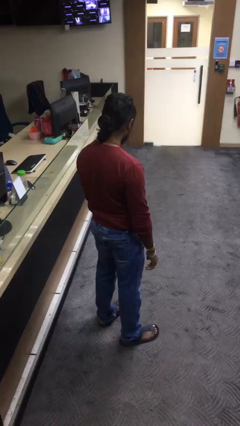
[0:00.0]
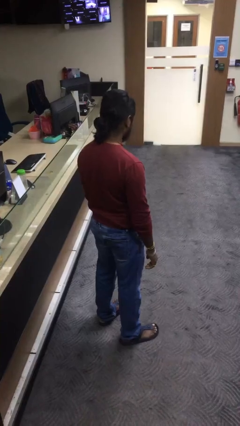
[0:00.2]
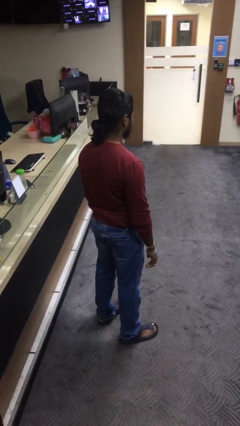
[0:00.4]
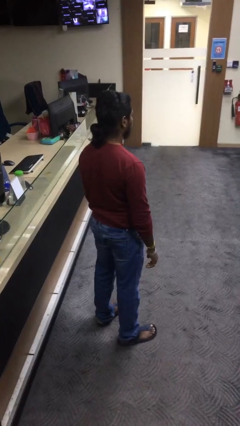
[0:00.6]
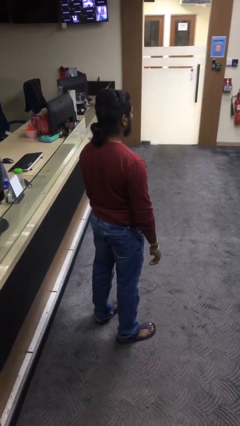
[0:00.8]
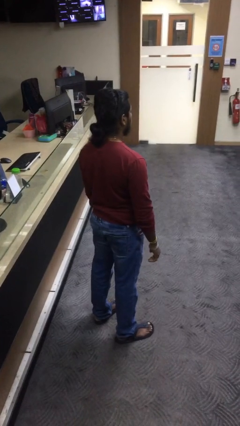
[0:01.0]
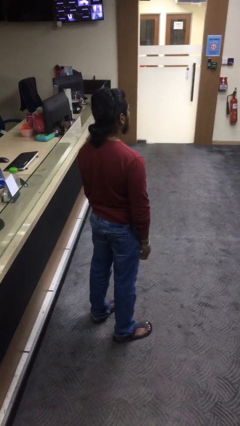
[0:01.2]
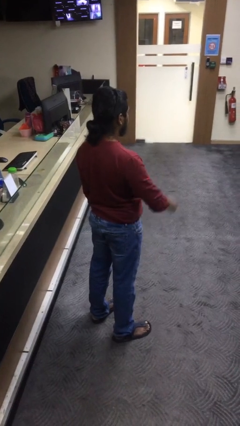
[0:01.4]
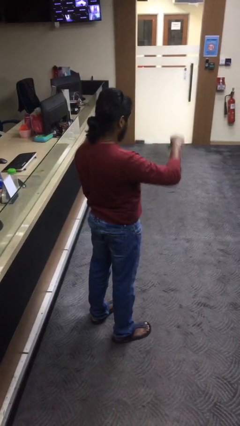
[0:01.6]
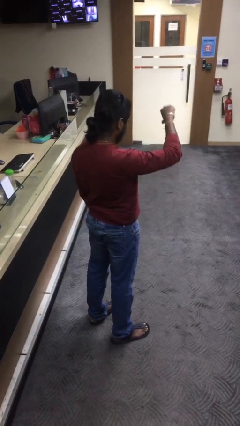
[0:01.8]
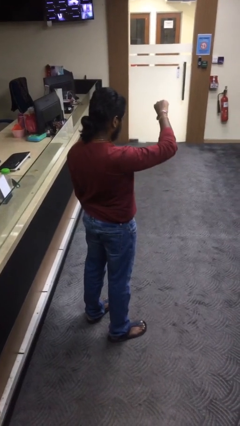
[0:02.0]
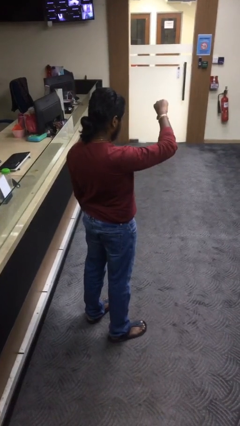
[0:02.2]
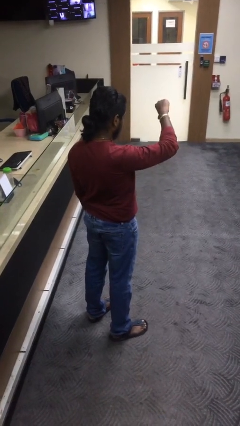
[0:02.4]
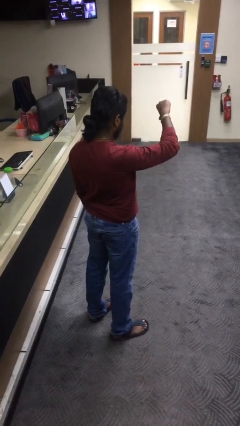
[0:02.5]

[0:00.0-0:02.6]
person gestures thumbs down

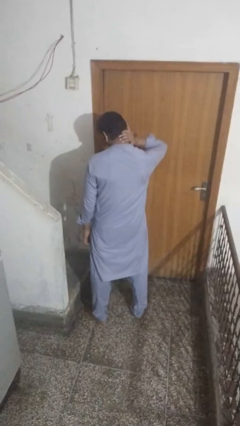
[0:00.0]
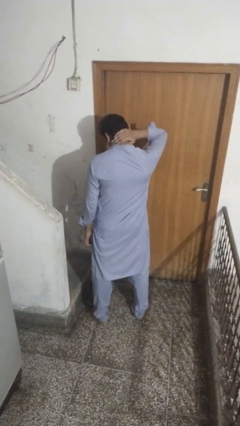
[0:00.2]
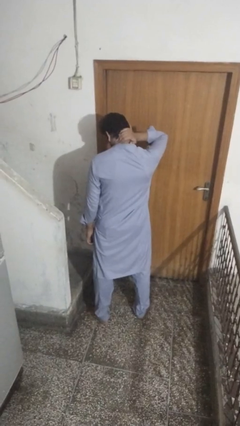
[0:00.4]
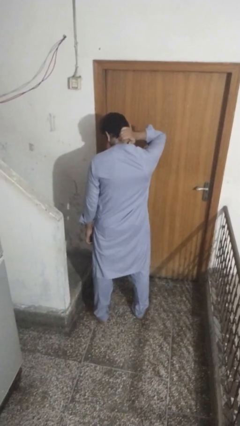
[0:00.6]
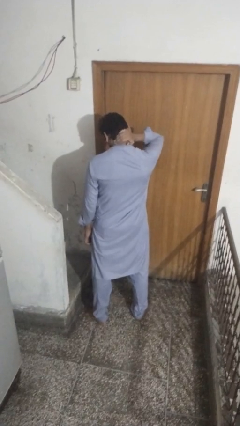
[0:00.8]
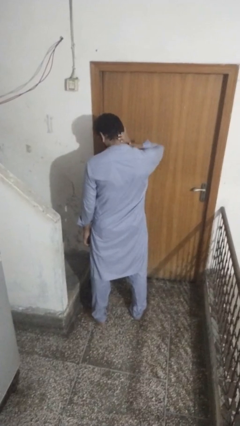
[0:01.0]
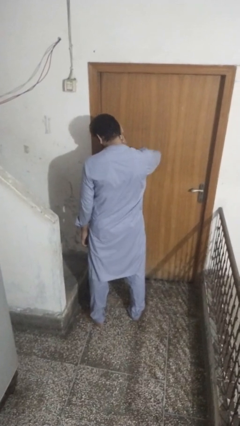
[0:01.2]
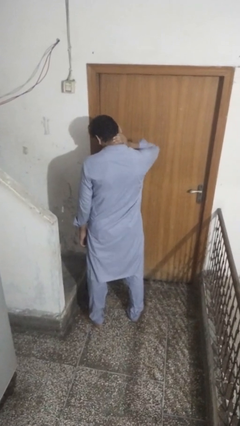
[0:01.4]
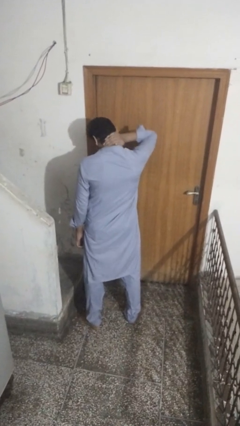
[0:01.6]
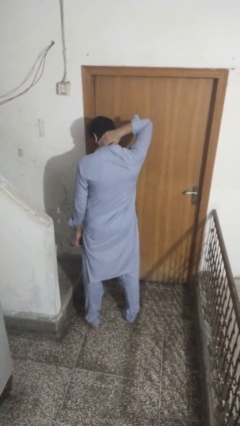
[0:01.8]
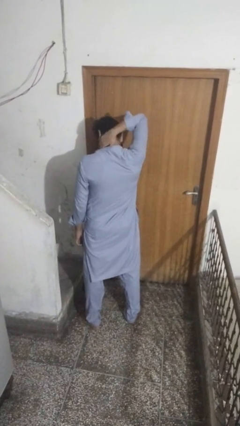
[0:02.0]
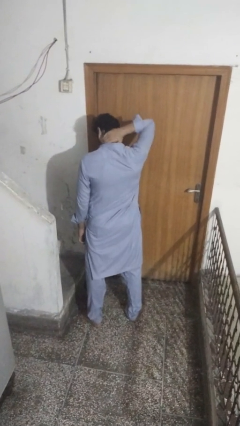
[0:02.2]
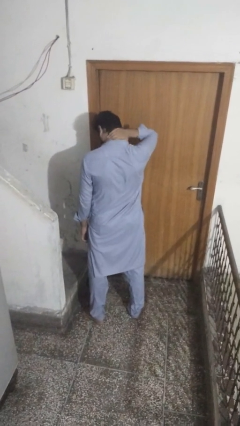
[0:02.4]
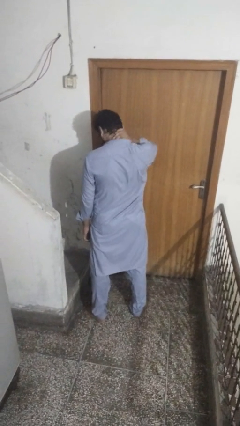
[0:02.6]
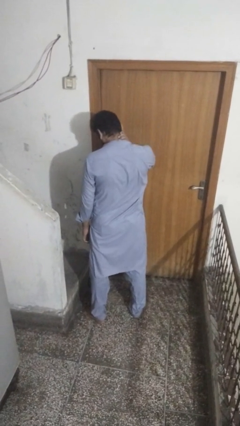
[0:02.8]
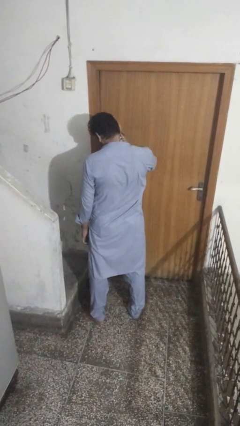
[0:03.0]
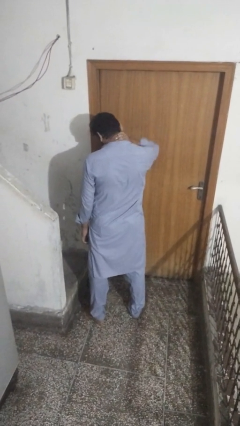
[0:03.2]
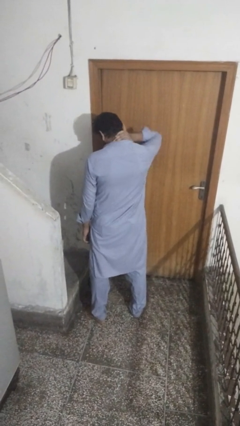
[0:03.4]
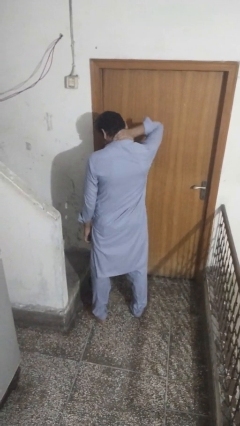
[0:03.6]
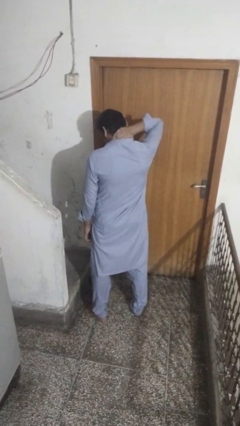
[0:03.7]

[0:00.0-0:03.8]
person rubs neck

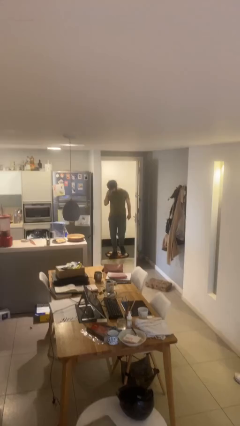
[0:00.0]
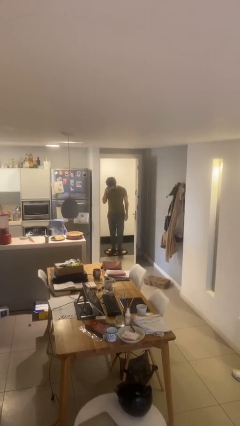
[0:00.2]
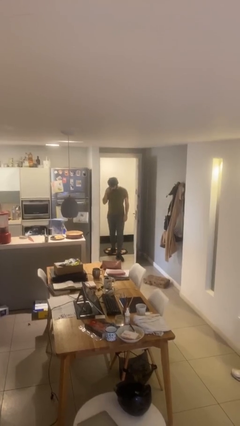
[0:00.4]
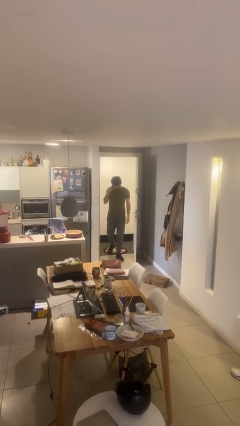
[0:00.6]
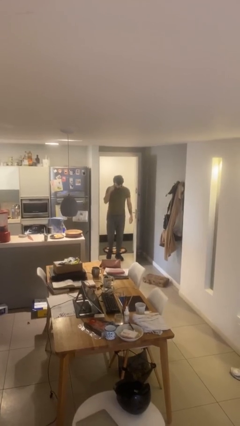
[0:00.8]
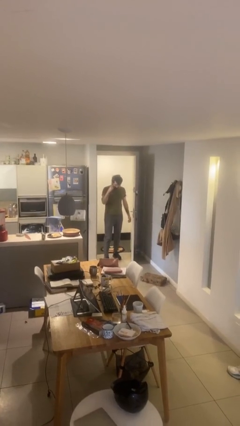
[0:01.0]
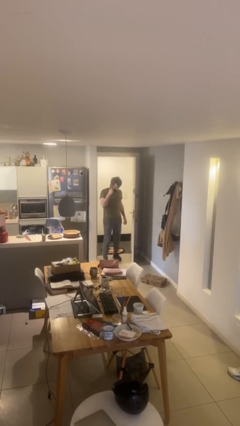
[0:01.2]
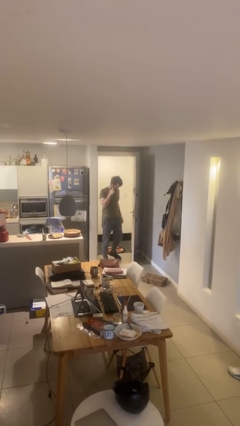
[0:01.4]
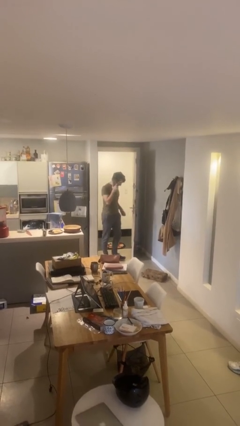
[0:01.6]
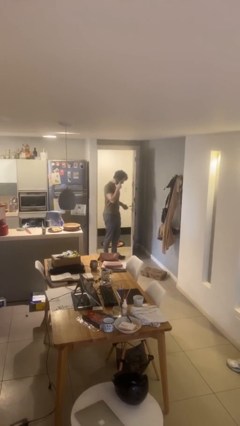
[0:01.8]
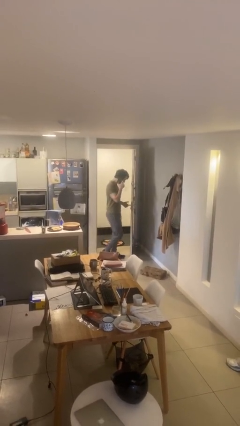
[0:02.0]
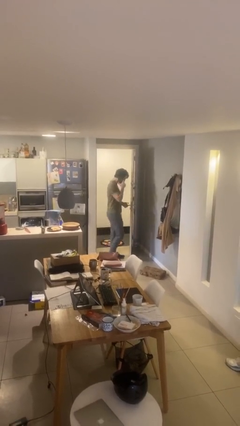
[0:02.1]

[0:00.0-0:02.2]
person enters scene through structure

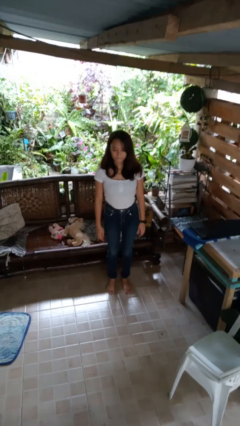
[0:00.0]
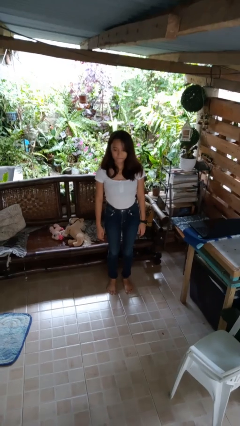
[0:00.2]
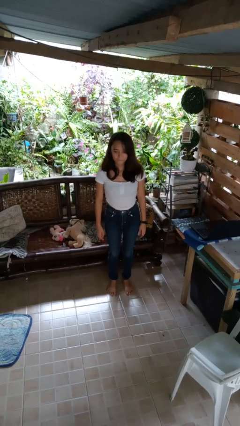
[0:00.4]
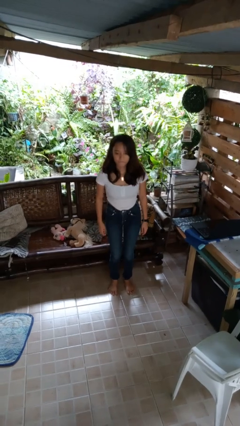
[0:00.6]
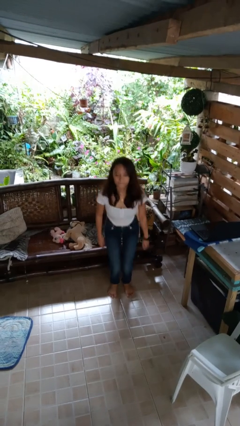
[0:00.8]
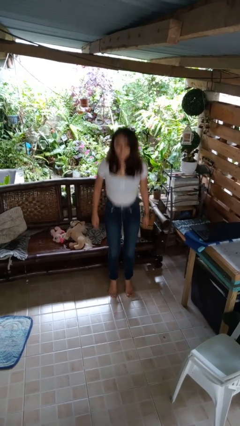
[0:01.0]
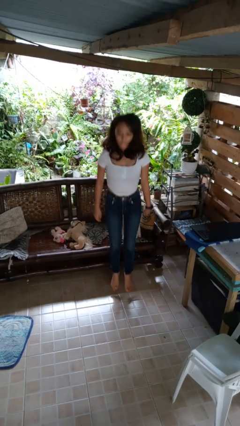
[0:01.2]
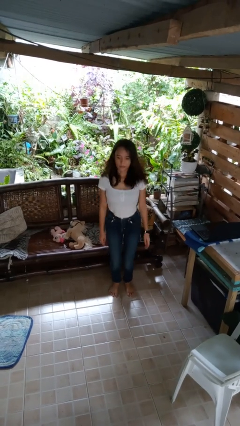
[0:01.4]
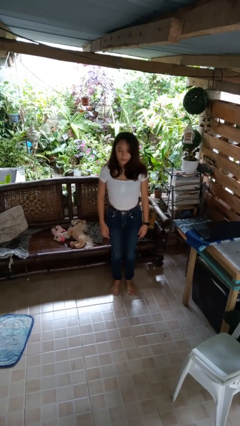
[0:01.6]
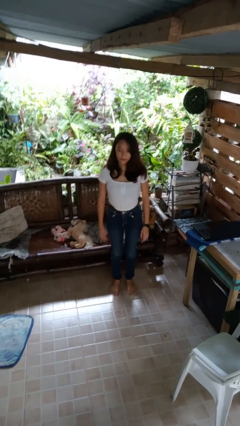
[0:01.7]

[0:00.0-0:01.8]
person jumps

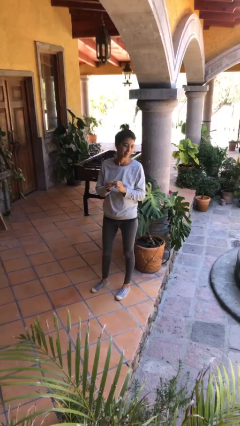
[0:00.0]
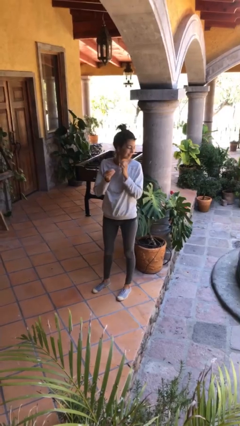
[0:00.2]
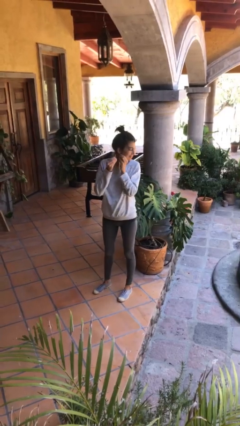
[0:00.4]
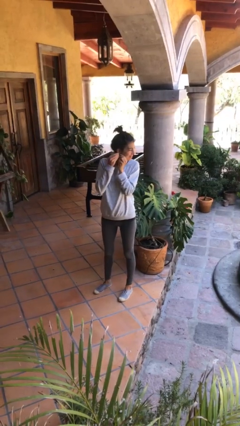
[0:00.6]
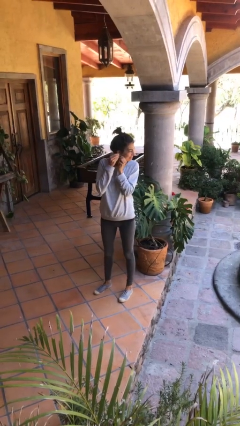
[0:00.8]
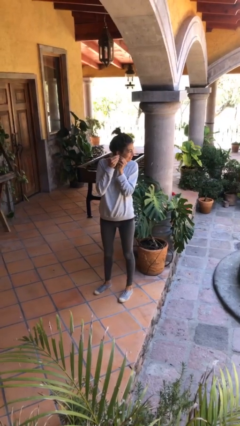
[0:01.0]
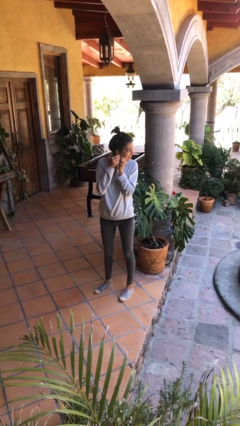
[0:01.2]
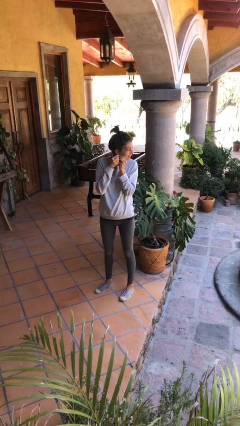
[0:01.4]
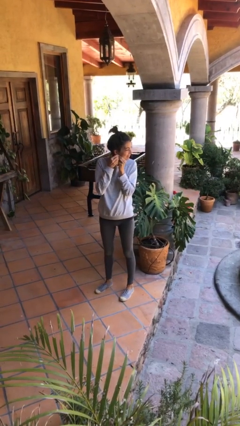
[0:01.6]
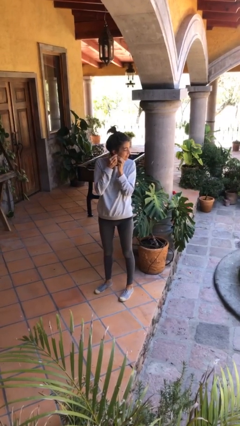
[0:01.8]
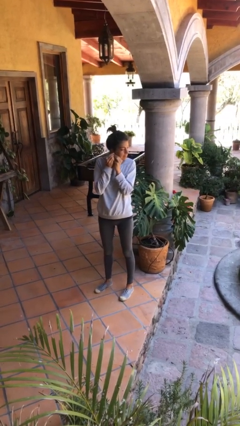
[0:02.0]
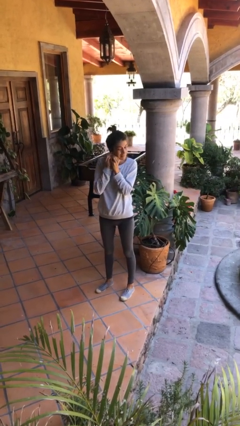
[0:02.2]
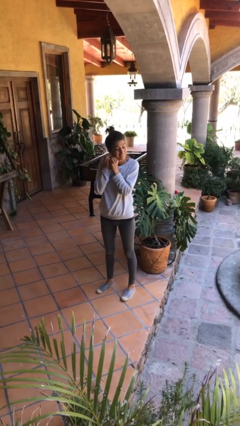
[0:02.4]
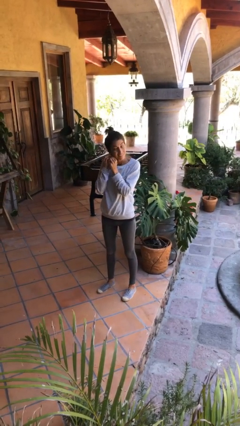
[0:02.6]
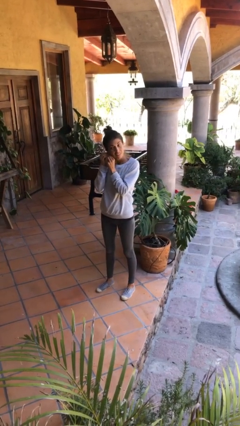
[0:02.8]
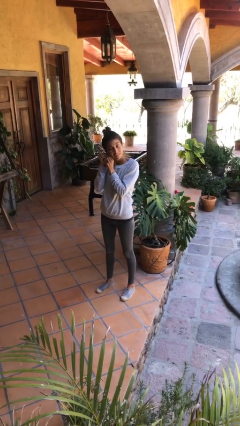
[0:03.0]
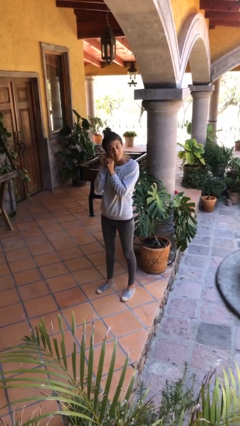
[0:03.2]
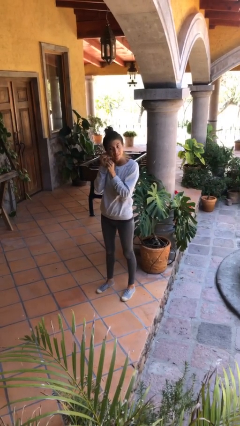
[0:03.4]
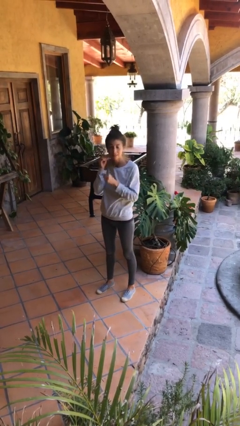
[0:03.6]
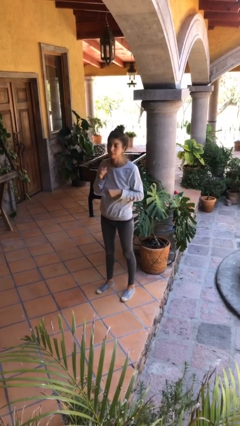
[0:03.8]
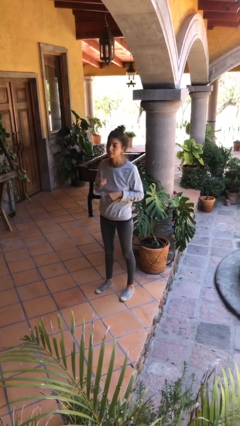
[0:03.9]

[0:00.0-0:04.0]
person puts on earrings

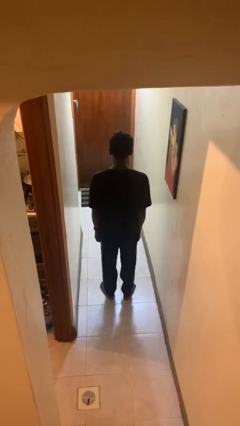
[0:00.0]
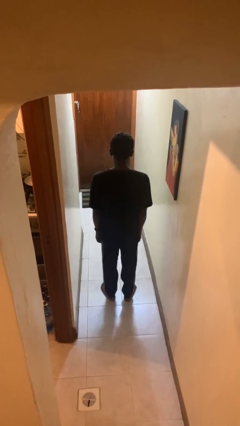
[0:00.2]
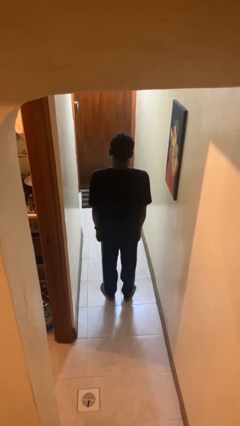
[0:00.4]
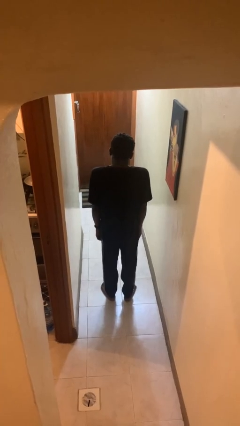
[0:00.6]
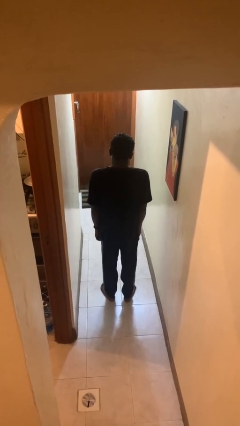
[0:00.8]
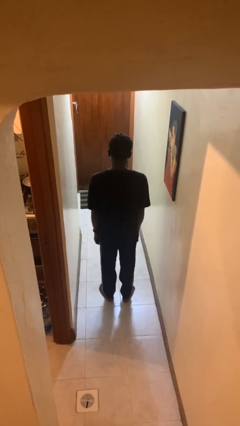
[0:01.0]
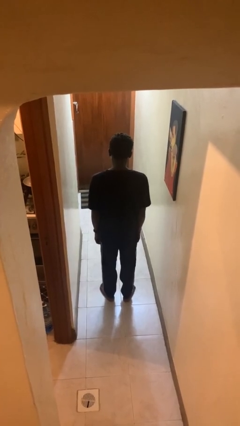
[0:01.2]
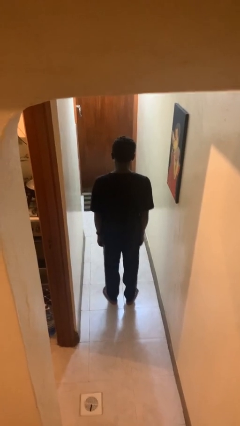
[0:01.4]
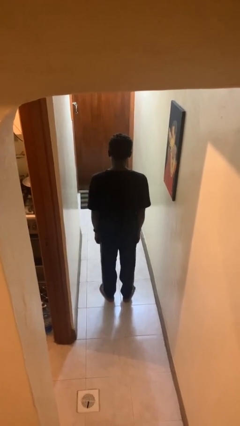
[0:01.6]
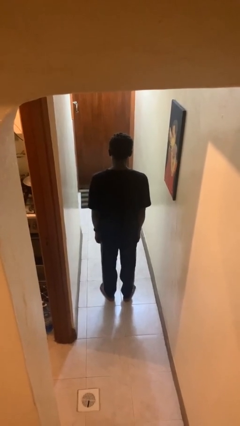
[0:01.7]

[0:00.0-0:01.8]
person shrugs

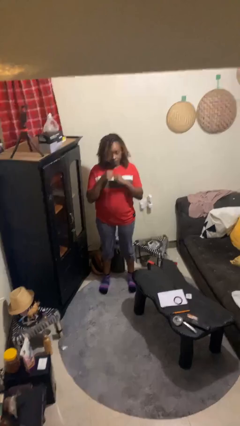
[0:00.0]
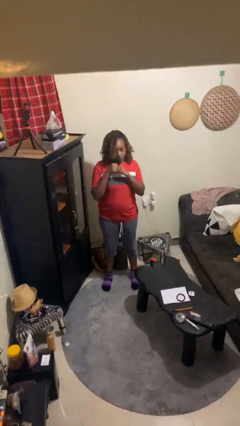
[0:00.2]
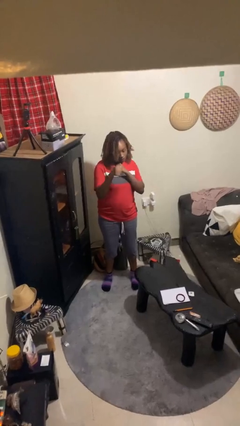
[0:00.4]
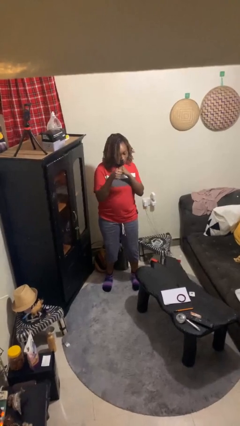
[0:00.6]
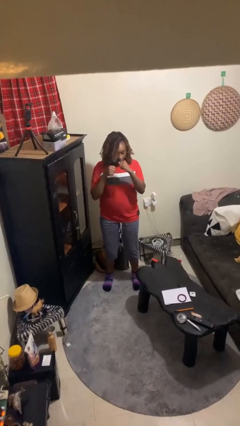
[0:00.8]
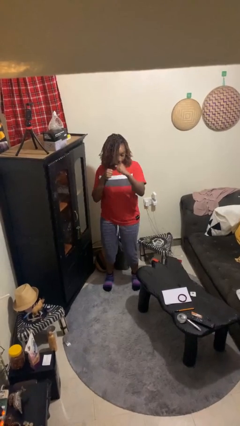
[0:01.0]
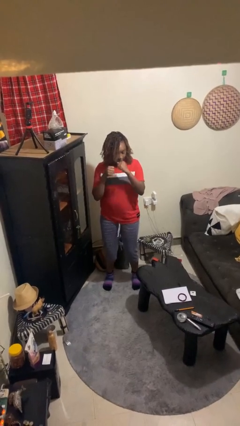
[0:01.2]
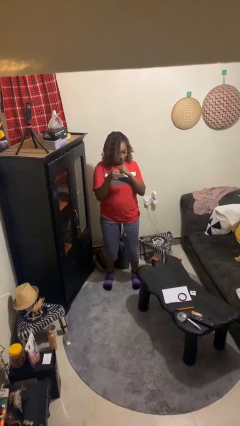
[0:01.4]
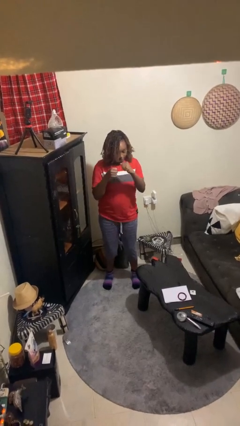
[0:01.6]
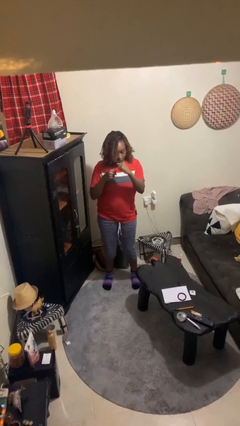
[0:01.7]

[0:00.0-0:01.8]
person punches
